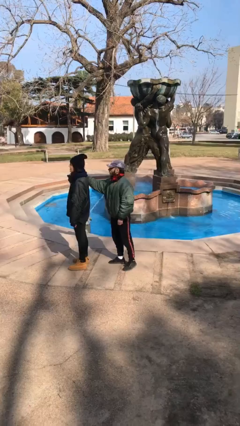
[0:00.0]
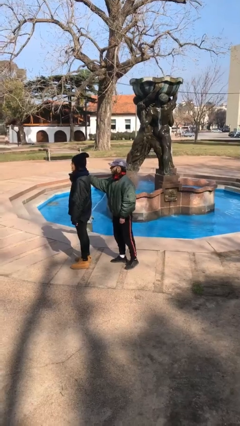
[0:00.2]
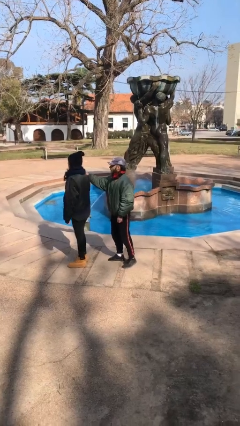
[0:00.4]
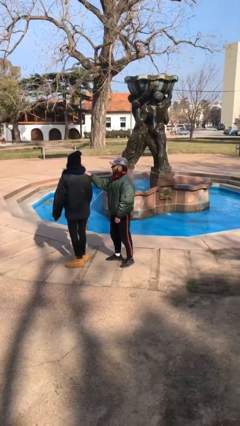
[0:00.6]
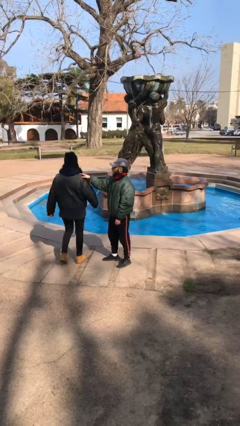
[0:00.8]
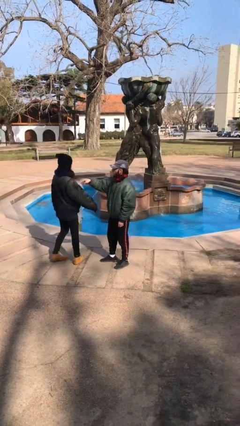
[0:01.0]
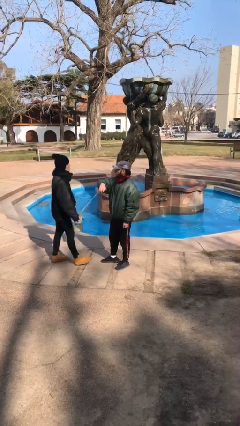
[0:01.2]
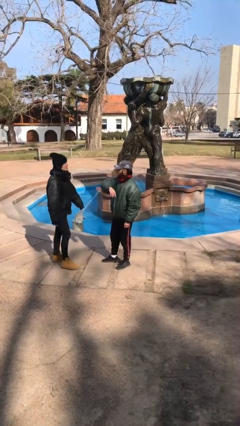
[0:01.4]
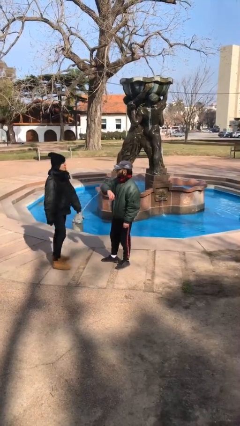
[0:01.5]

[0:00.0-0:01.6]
person spins person around

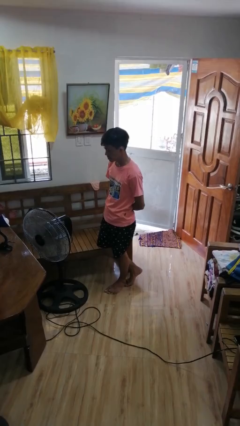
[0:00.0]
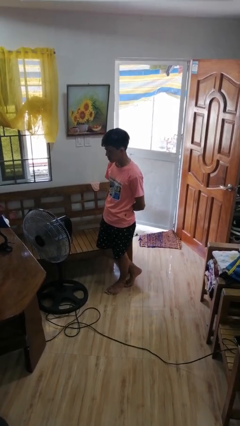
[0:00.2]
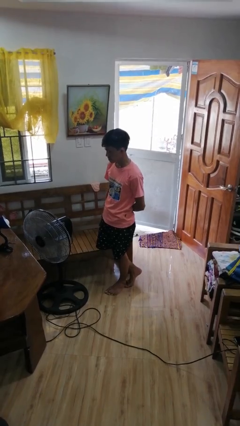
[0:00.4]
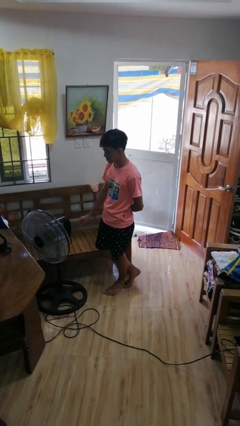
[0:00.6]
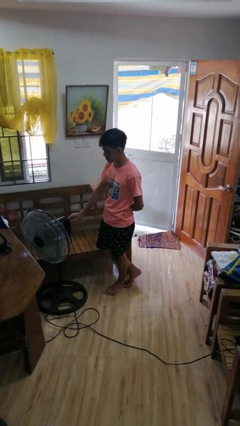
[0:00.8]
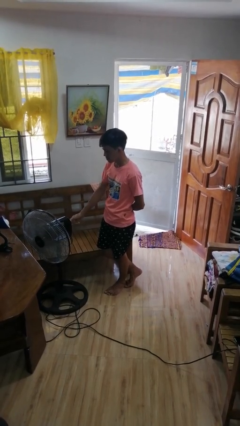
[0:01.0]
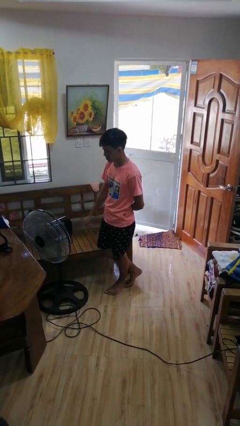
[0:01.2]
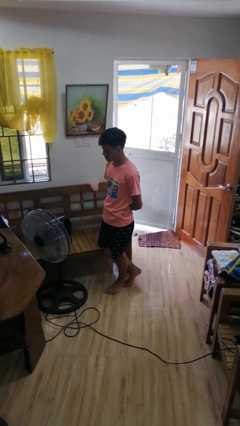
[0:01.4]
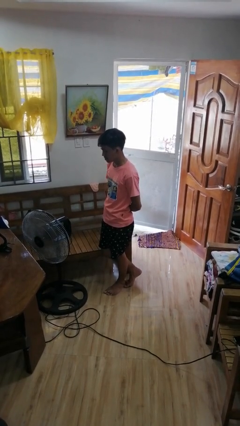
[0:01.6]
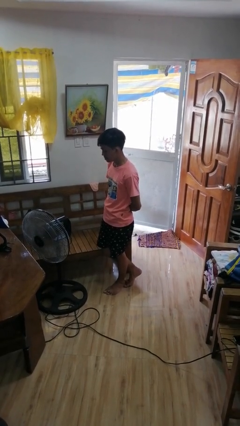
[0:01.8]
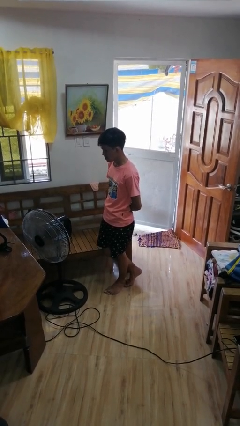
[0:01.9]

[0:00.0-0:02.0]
person turns off fan

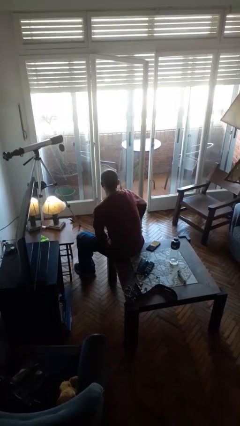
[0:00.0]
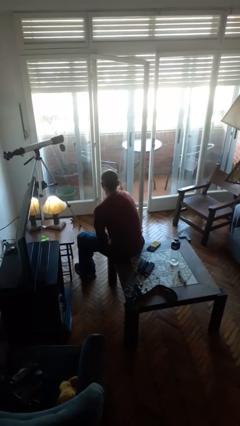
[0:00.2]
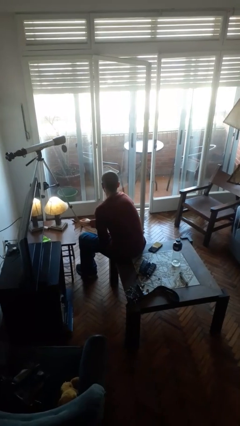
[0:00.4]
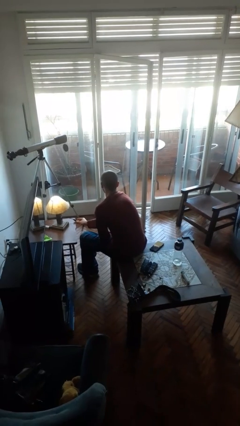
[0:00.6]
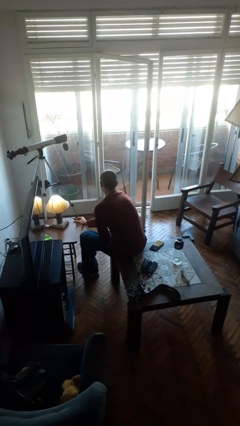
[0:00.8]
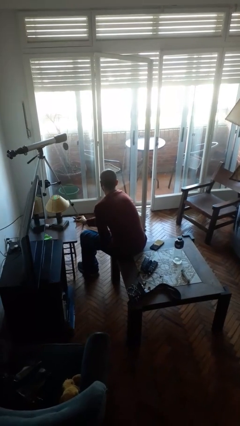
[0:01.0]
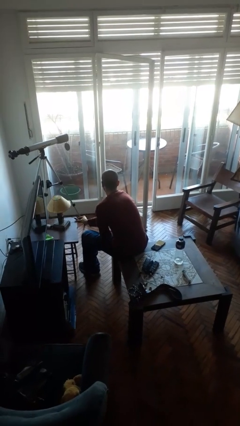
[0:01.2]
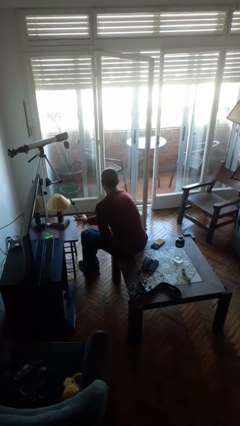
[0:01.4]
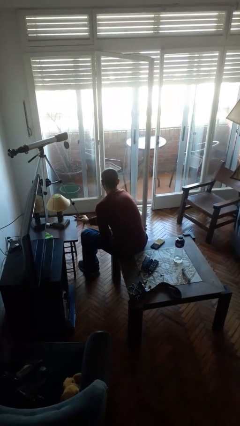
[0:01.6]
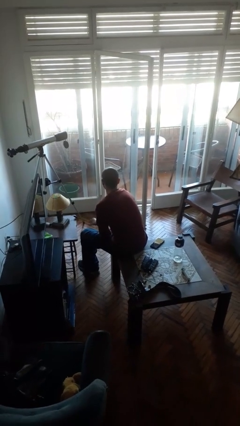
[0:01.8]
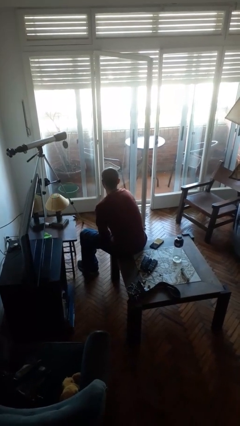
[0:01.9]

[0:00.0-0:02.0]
person turns off lamp

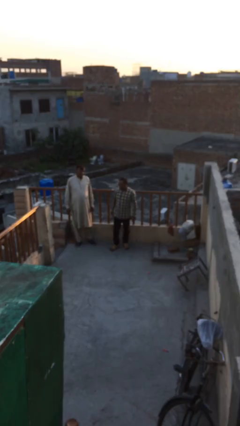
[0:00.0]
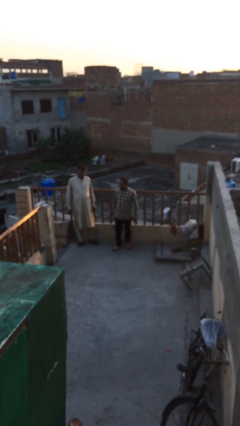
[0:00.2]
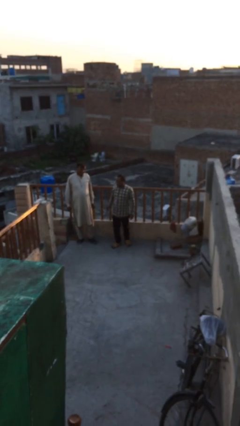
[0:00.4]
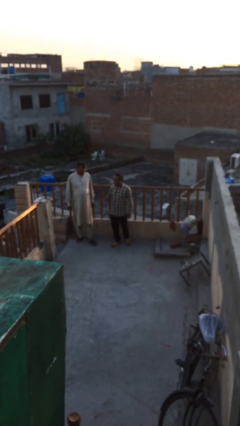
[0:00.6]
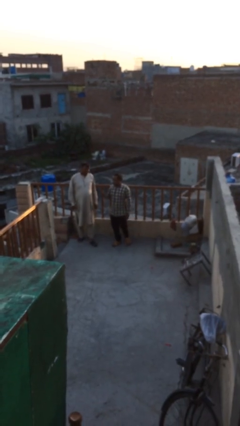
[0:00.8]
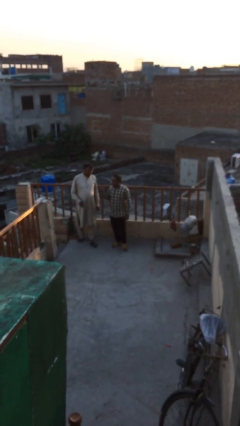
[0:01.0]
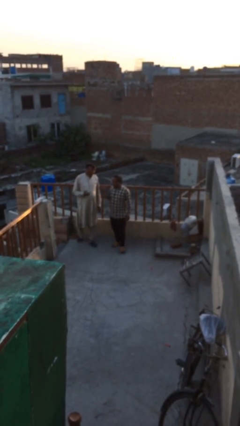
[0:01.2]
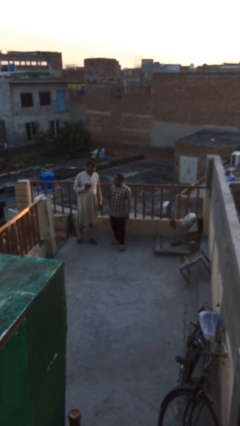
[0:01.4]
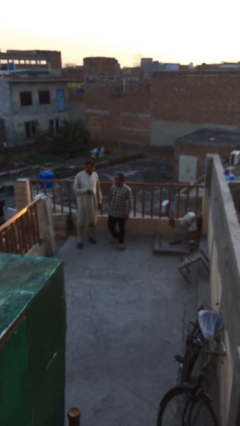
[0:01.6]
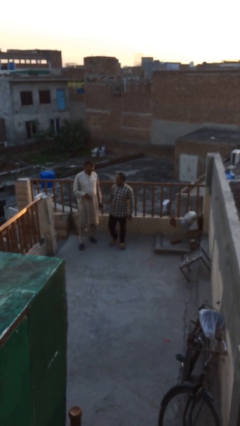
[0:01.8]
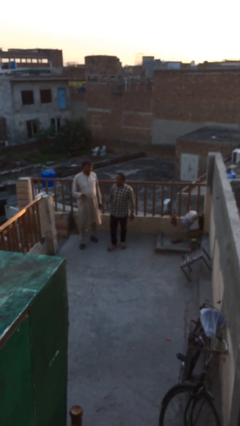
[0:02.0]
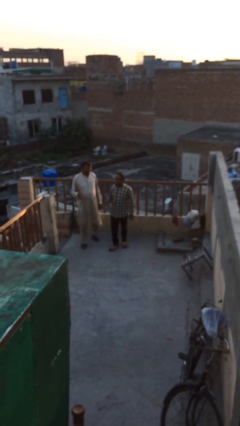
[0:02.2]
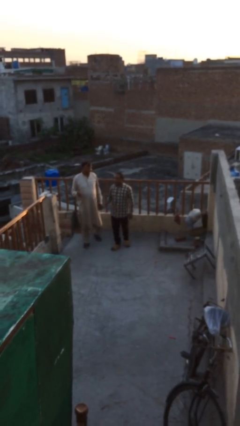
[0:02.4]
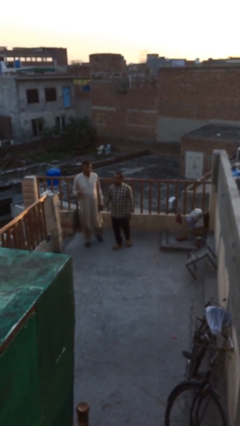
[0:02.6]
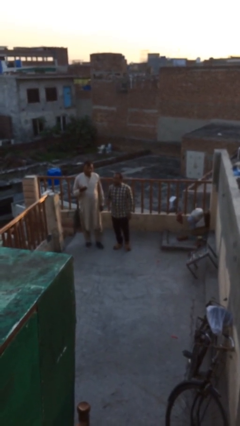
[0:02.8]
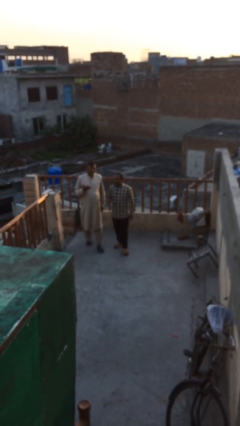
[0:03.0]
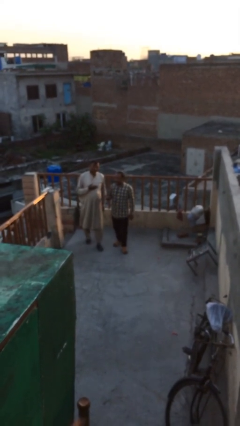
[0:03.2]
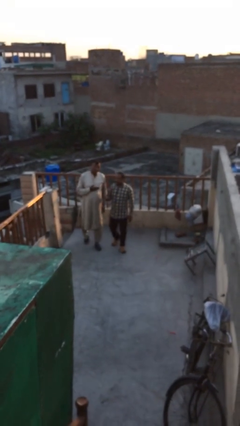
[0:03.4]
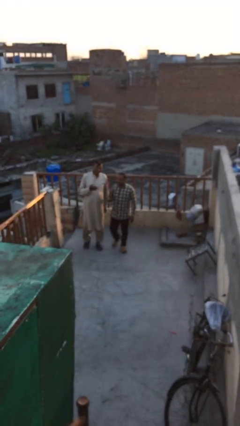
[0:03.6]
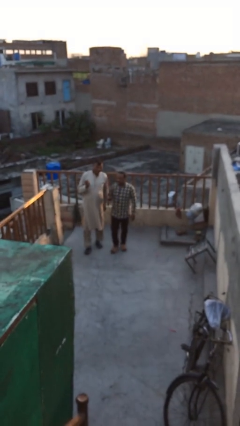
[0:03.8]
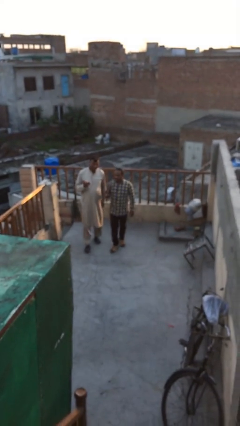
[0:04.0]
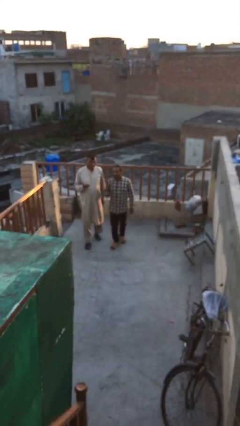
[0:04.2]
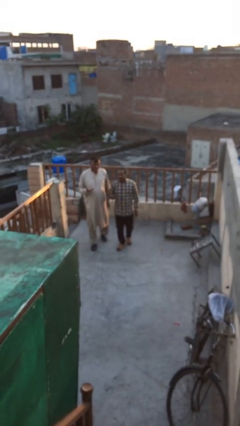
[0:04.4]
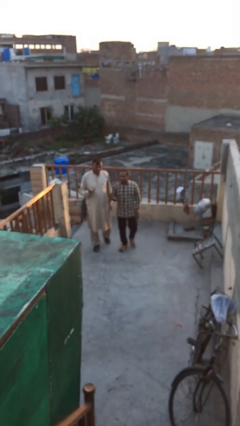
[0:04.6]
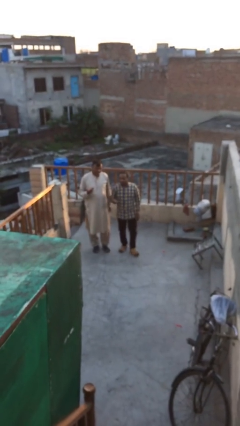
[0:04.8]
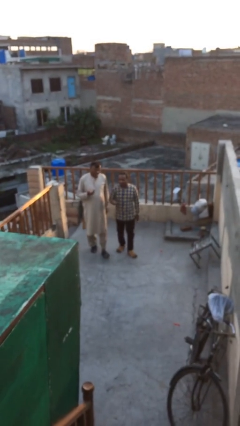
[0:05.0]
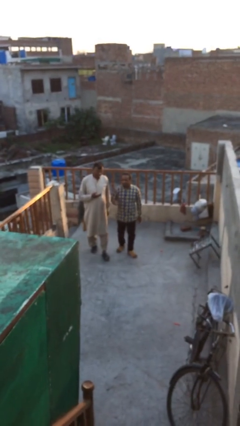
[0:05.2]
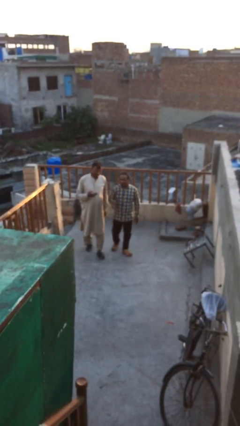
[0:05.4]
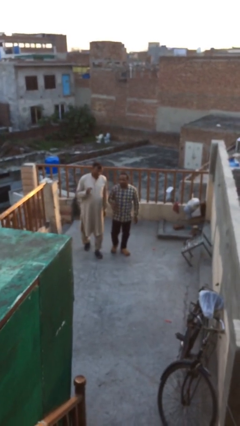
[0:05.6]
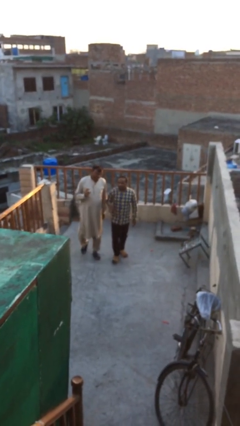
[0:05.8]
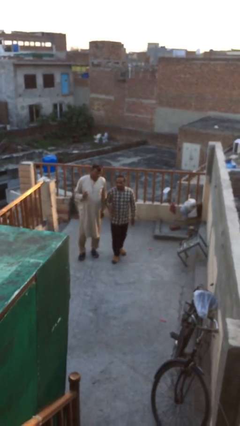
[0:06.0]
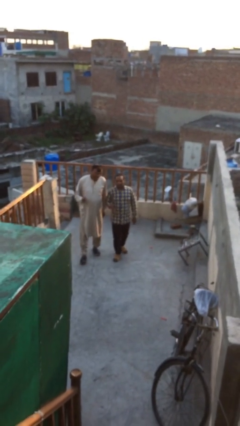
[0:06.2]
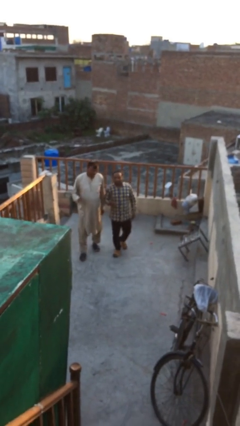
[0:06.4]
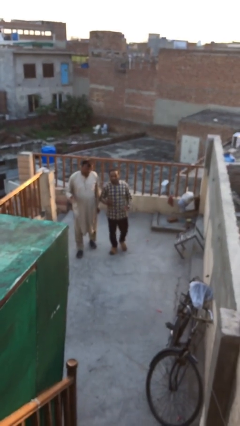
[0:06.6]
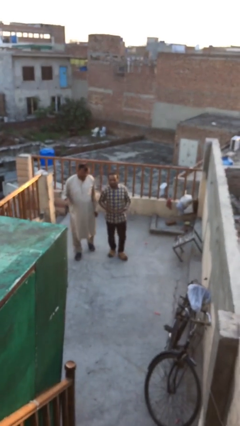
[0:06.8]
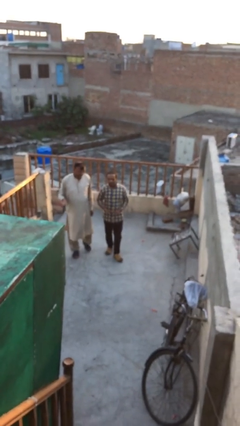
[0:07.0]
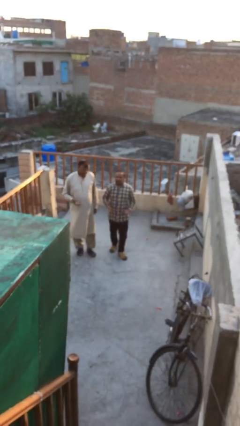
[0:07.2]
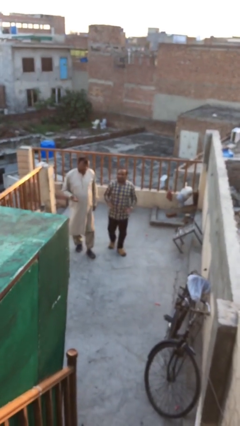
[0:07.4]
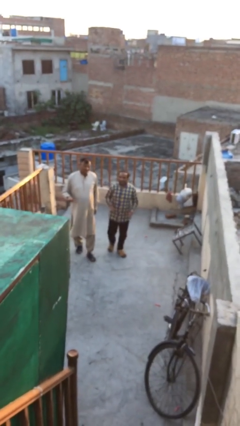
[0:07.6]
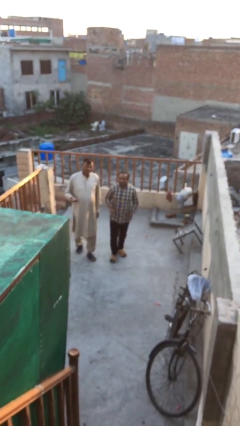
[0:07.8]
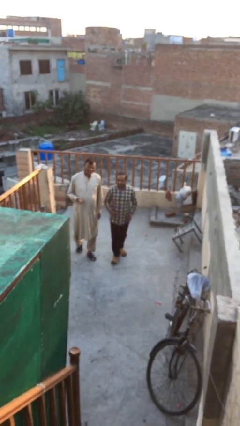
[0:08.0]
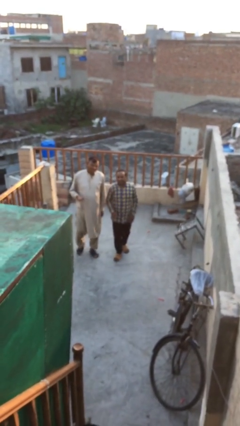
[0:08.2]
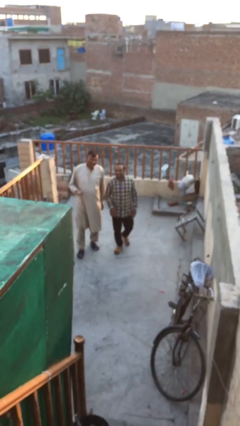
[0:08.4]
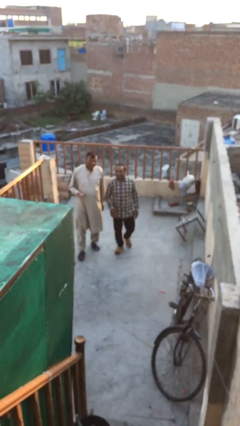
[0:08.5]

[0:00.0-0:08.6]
person talks to person

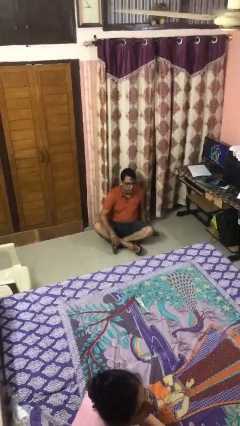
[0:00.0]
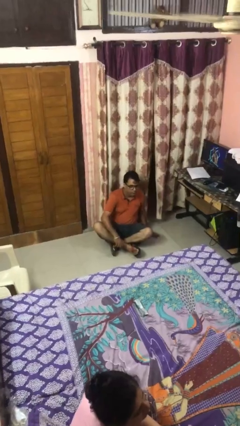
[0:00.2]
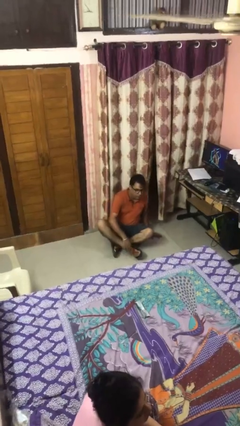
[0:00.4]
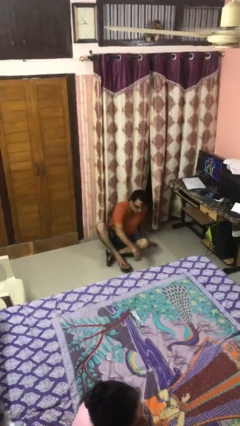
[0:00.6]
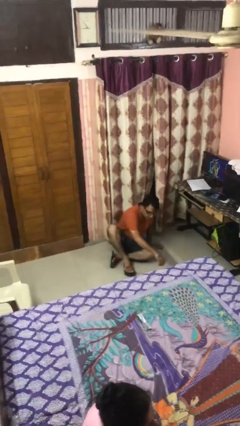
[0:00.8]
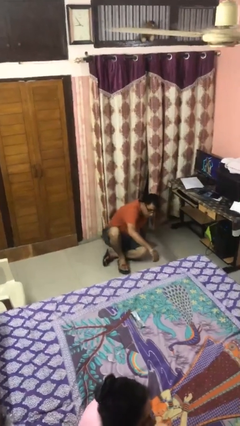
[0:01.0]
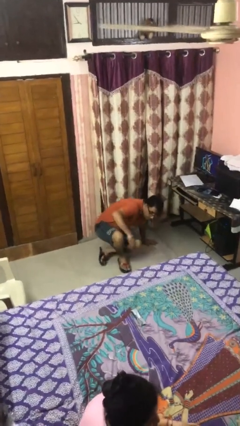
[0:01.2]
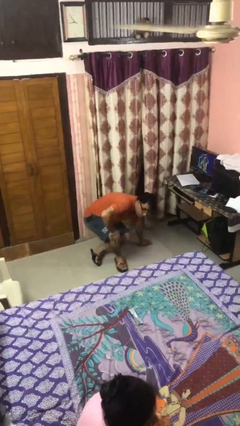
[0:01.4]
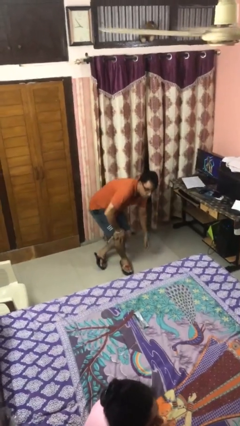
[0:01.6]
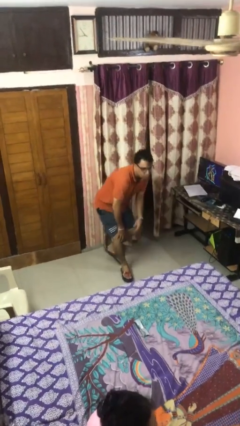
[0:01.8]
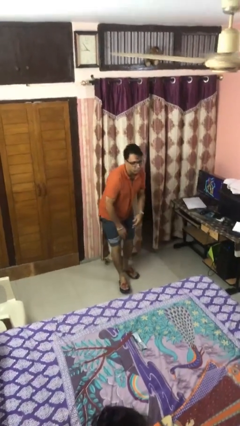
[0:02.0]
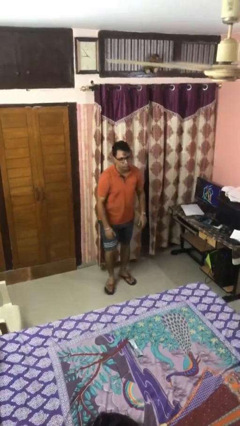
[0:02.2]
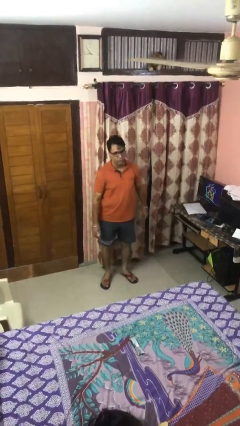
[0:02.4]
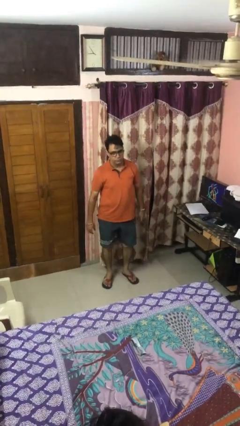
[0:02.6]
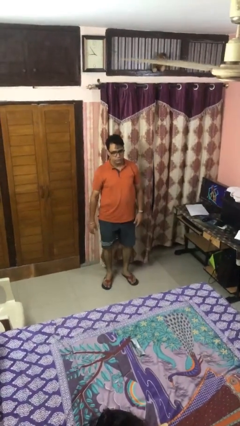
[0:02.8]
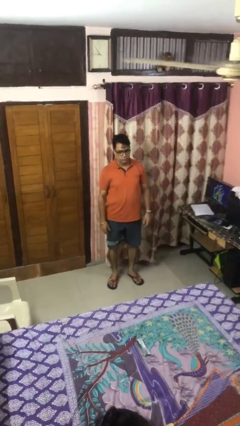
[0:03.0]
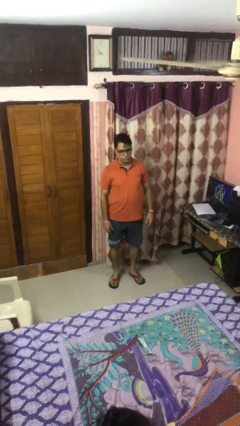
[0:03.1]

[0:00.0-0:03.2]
person stands up from floor

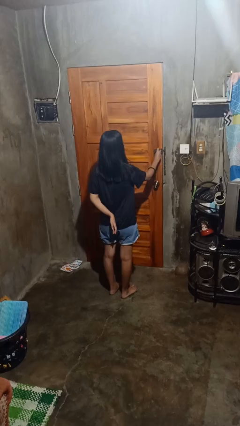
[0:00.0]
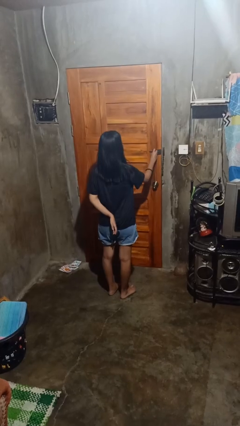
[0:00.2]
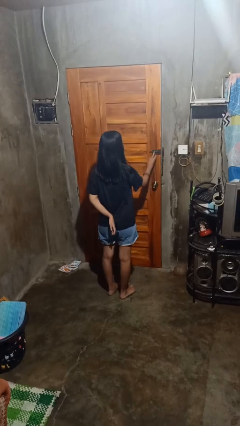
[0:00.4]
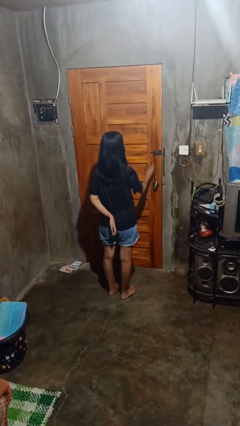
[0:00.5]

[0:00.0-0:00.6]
person unlocks door with keys
